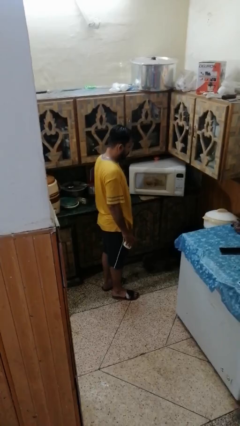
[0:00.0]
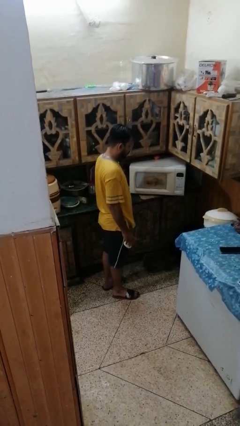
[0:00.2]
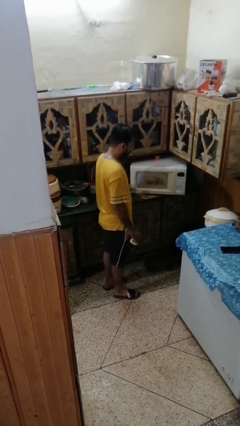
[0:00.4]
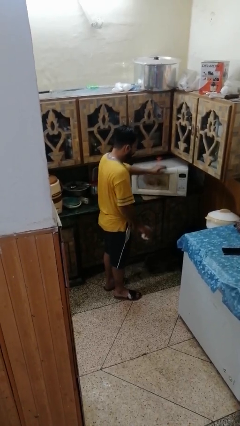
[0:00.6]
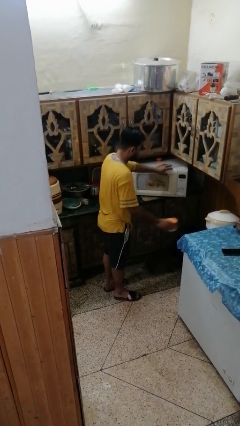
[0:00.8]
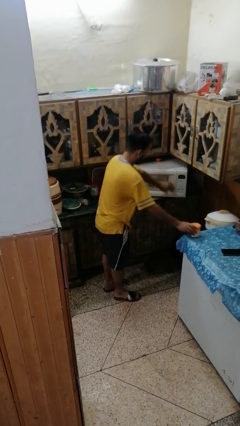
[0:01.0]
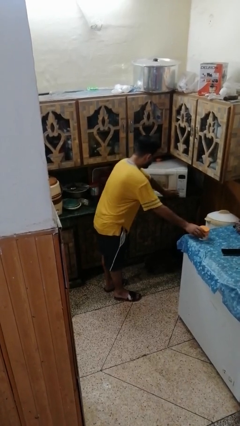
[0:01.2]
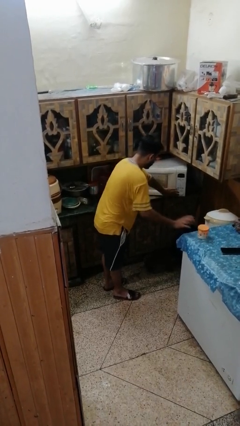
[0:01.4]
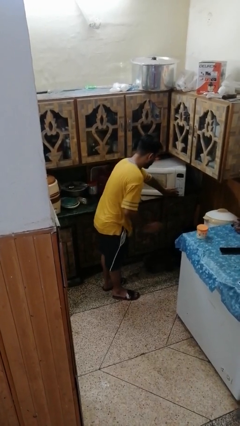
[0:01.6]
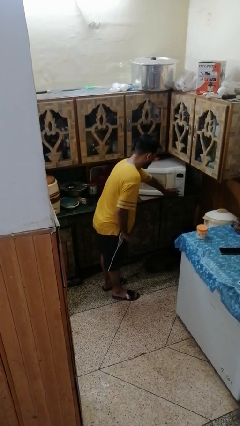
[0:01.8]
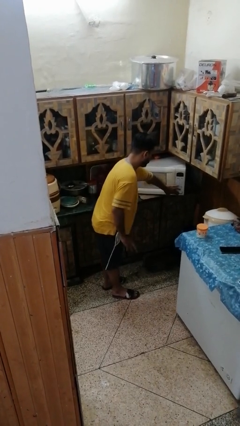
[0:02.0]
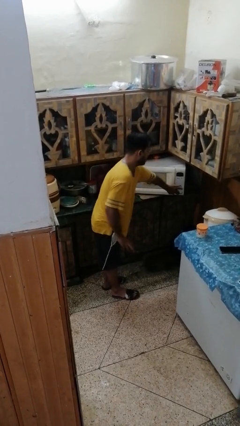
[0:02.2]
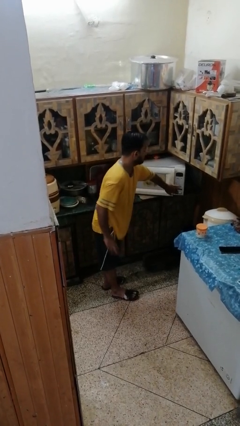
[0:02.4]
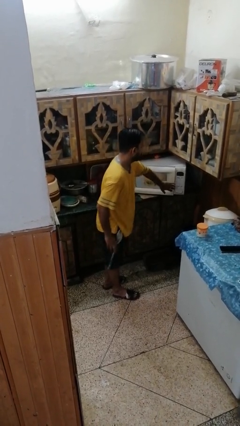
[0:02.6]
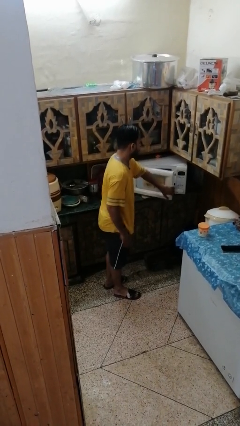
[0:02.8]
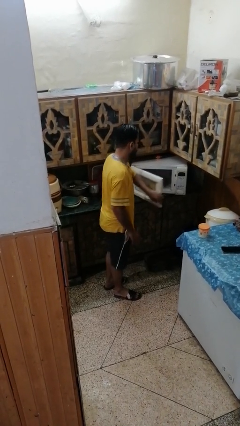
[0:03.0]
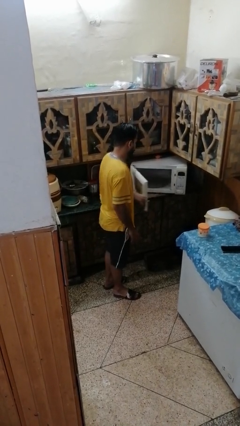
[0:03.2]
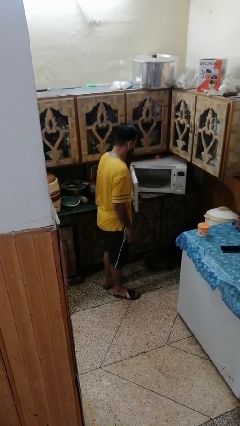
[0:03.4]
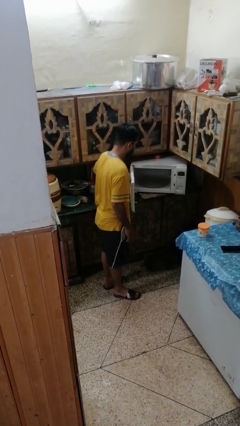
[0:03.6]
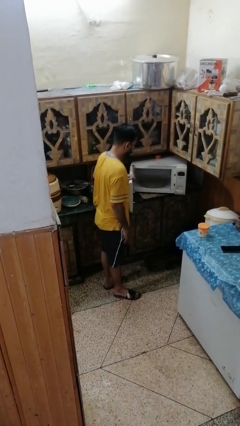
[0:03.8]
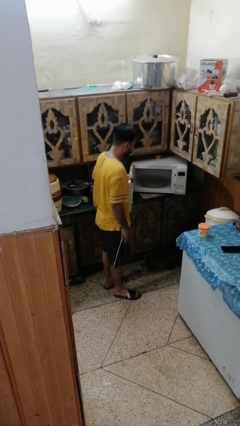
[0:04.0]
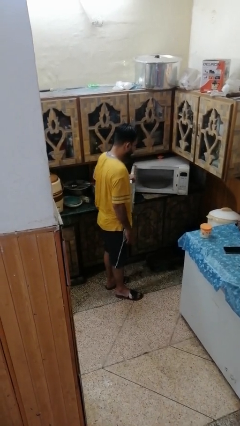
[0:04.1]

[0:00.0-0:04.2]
person opens refrigerator

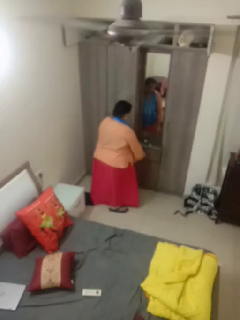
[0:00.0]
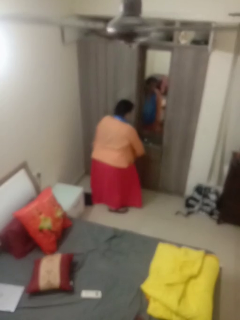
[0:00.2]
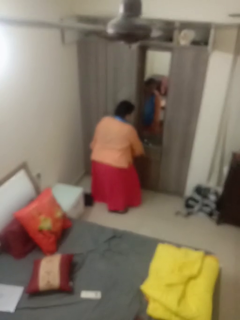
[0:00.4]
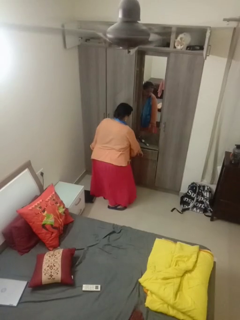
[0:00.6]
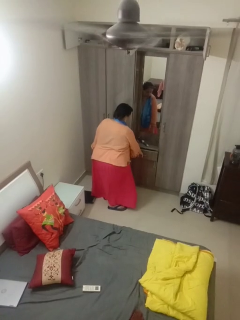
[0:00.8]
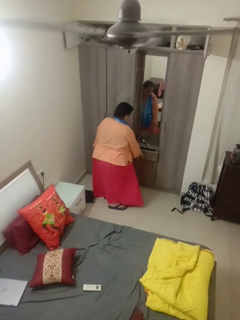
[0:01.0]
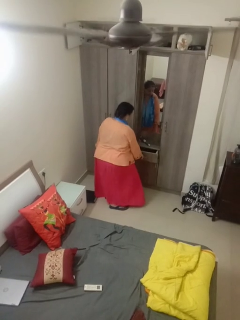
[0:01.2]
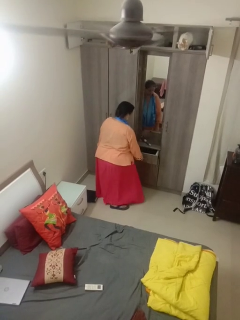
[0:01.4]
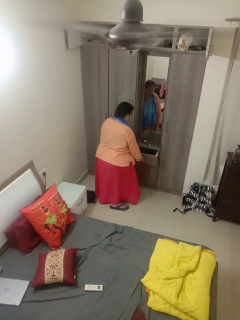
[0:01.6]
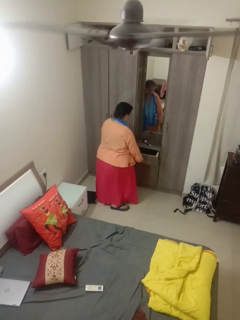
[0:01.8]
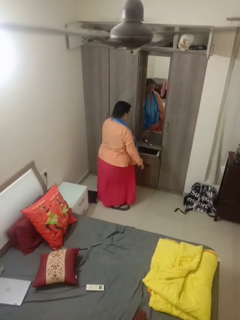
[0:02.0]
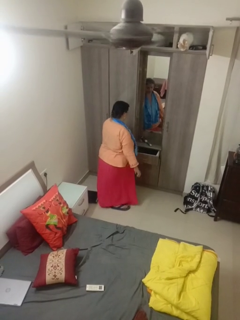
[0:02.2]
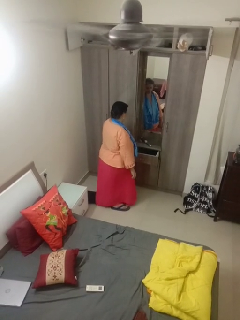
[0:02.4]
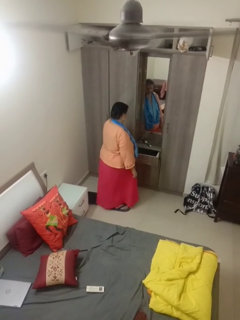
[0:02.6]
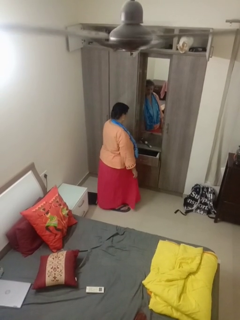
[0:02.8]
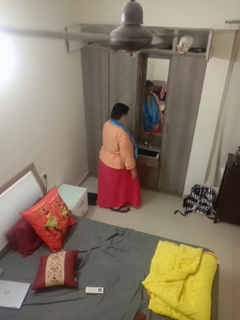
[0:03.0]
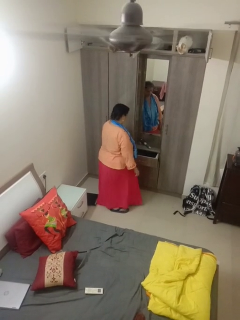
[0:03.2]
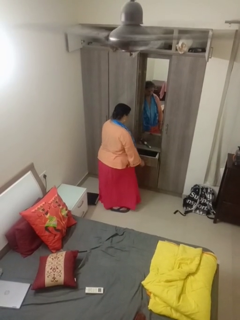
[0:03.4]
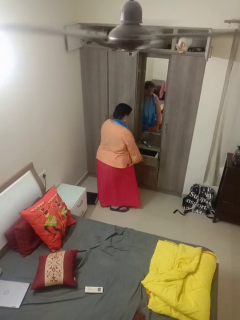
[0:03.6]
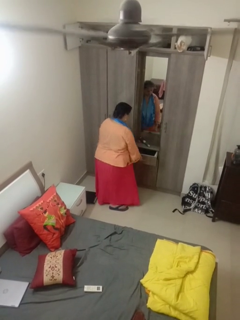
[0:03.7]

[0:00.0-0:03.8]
person opens dresser drawer

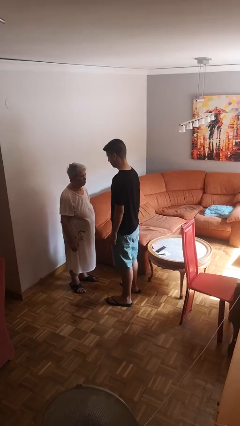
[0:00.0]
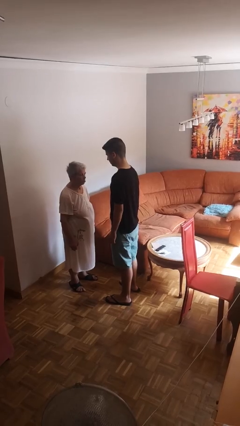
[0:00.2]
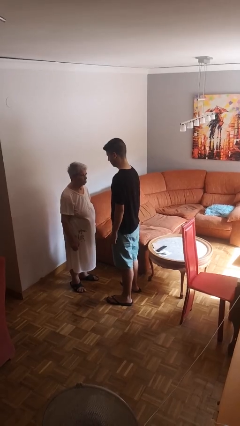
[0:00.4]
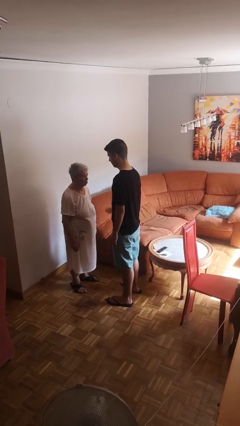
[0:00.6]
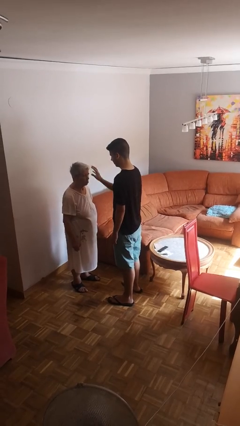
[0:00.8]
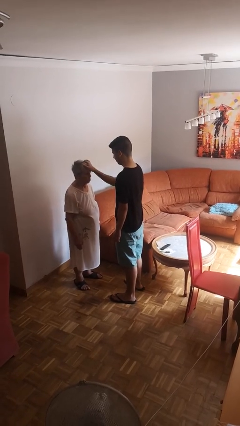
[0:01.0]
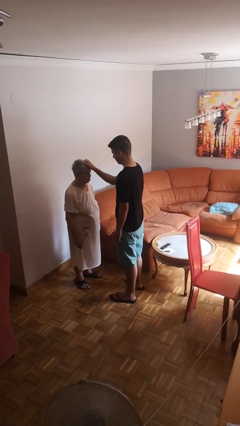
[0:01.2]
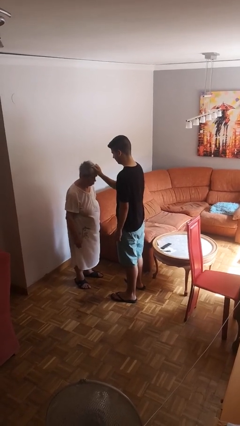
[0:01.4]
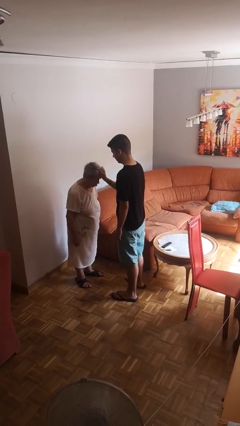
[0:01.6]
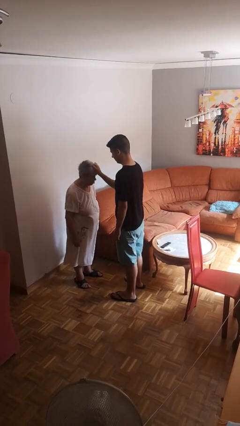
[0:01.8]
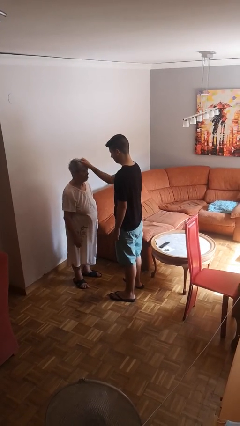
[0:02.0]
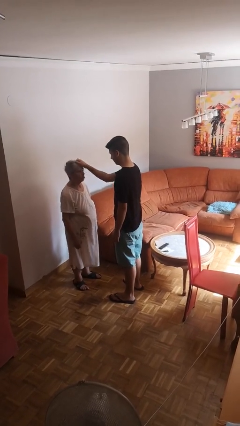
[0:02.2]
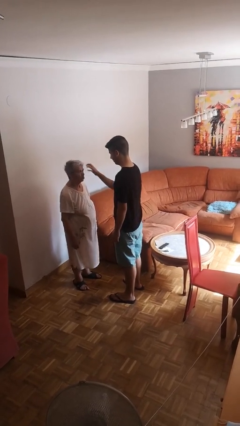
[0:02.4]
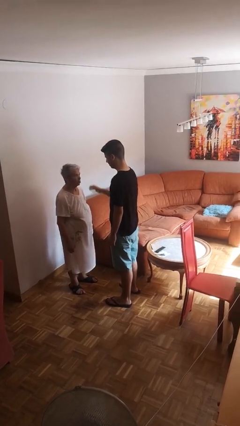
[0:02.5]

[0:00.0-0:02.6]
person grabs person by hair

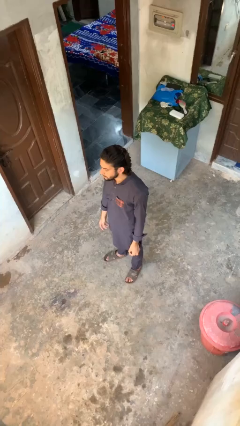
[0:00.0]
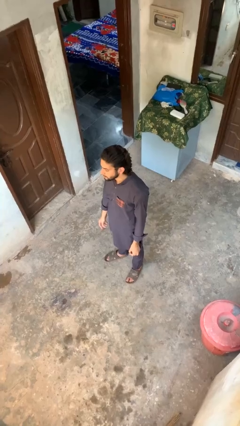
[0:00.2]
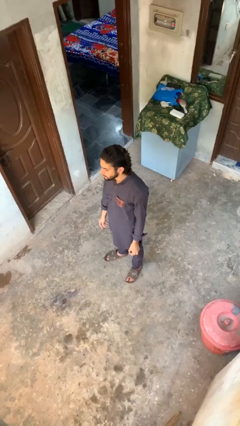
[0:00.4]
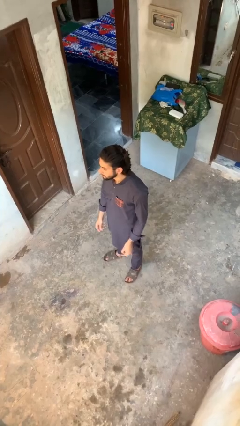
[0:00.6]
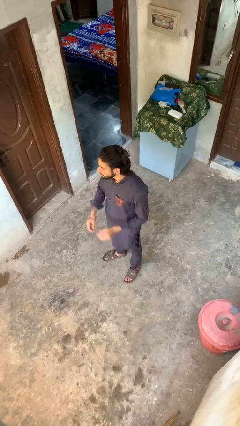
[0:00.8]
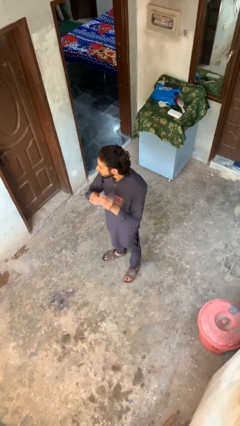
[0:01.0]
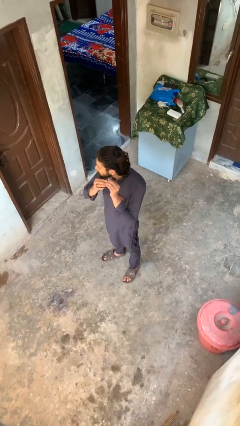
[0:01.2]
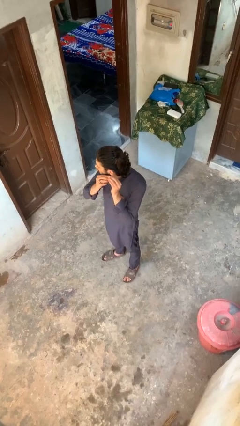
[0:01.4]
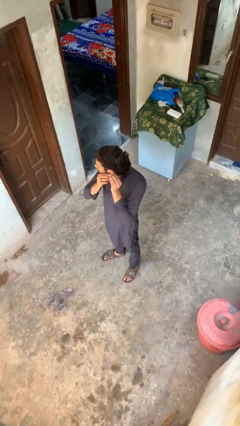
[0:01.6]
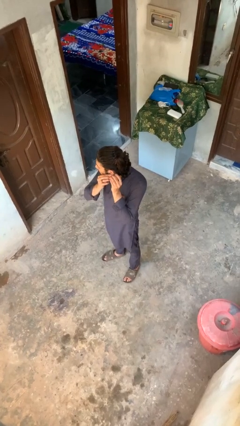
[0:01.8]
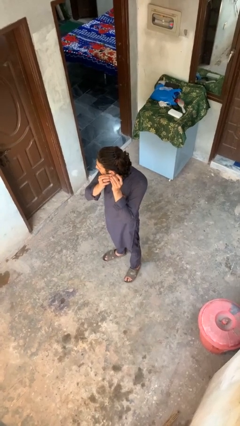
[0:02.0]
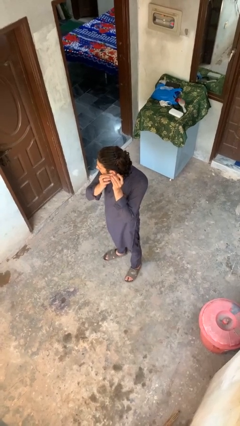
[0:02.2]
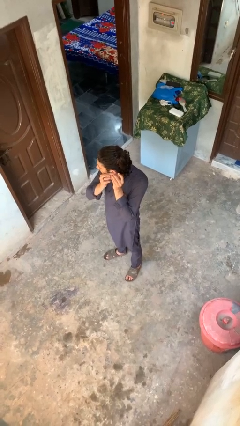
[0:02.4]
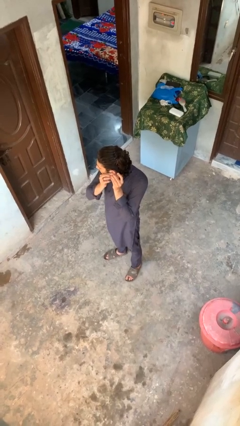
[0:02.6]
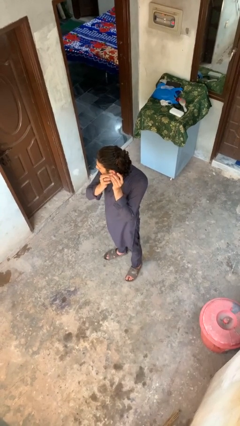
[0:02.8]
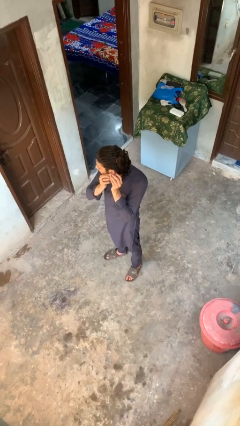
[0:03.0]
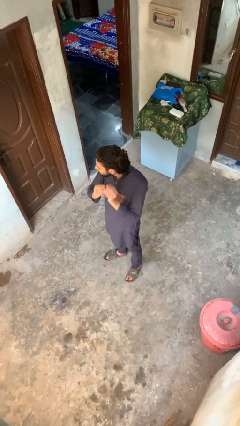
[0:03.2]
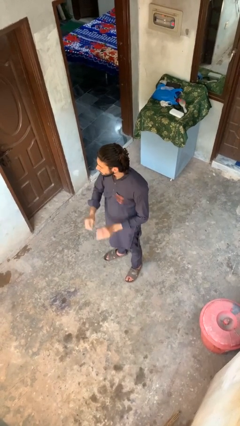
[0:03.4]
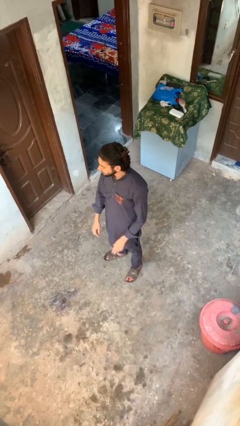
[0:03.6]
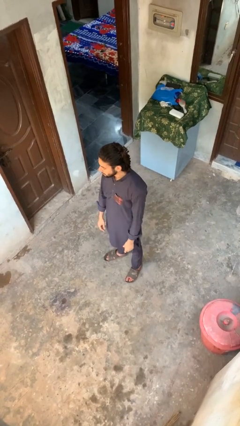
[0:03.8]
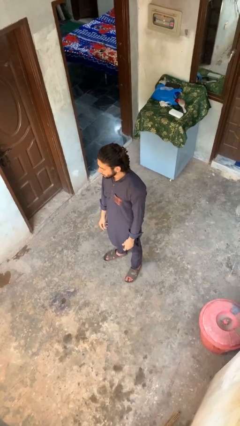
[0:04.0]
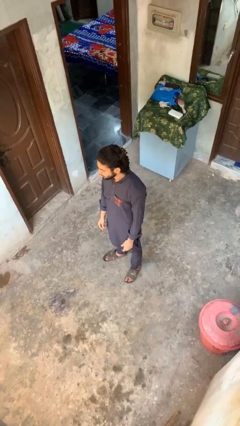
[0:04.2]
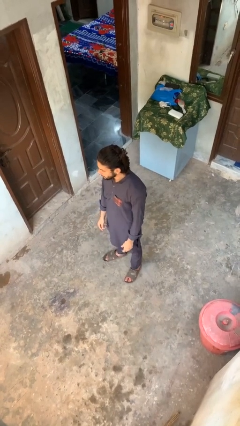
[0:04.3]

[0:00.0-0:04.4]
person puts on earrings

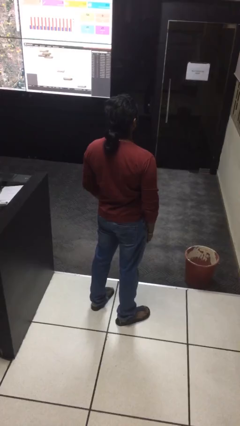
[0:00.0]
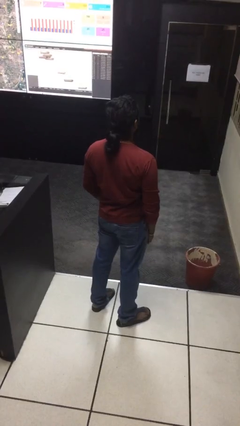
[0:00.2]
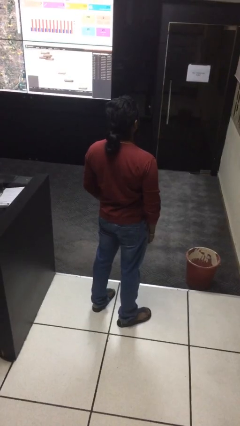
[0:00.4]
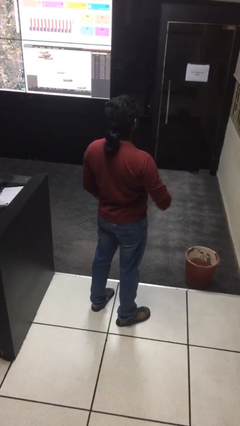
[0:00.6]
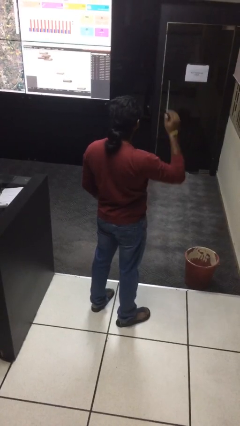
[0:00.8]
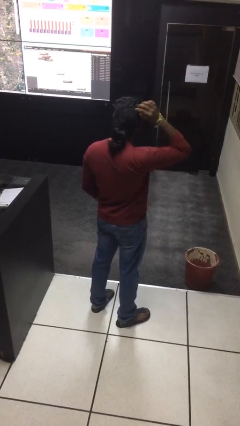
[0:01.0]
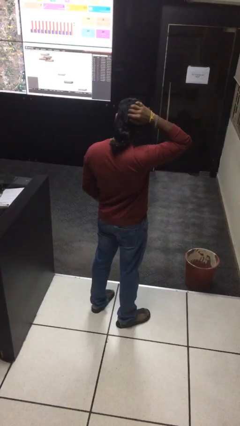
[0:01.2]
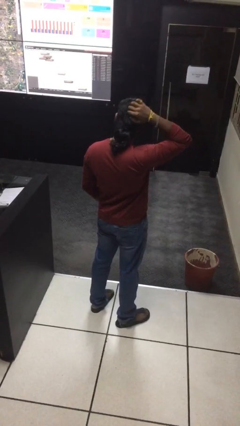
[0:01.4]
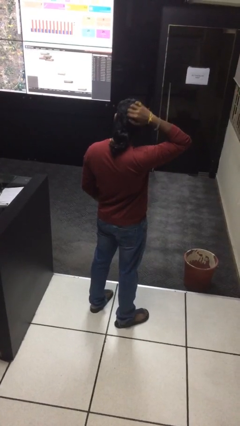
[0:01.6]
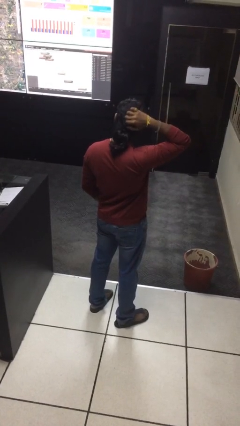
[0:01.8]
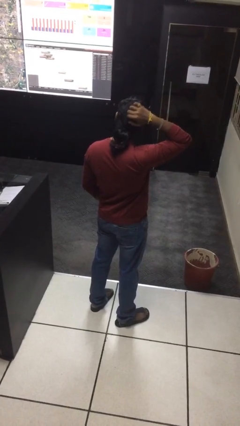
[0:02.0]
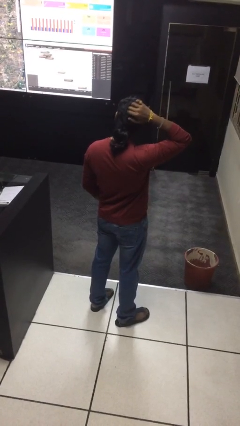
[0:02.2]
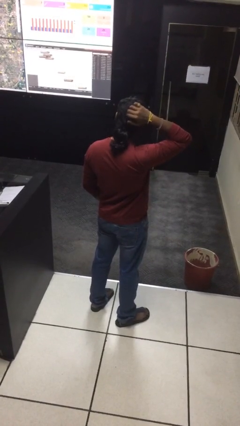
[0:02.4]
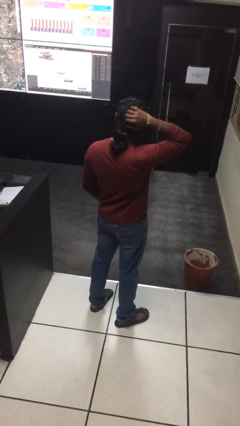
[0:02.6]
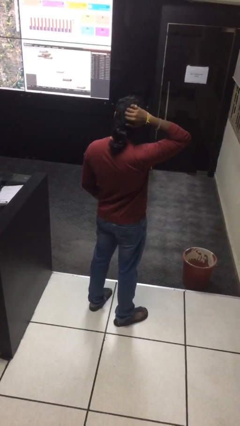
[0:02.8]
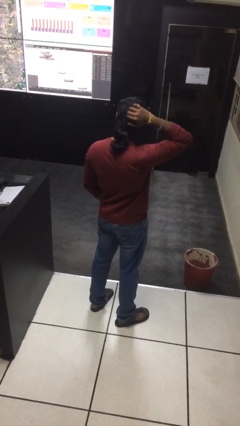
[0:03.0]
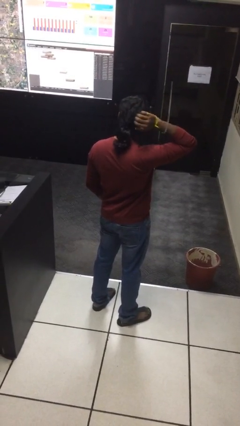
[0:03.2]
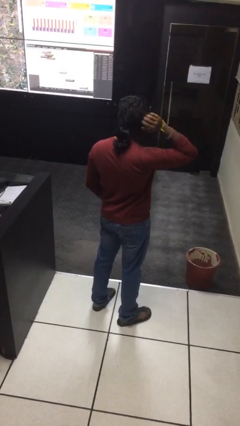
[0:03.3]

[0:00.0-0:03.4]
person scratches face
